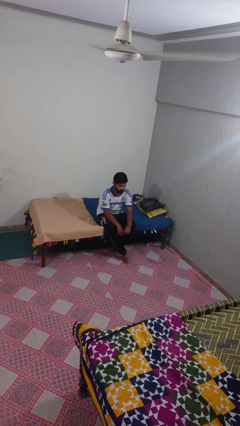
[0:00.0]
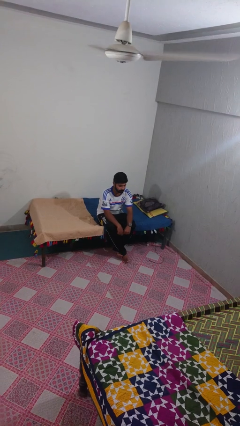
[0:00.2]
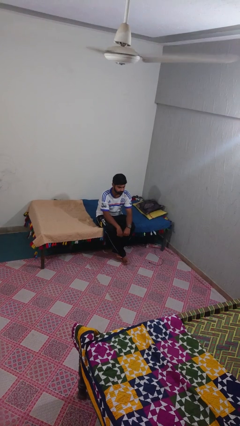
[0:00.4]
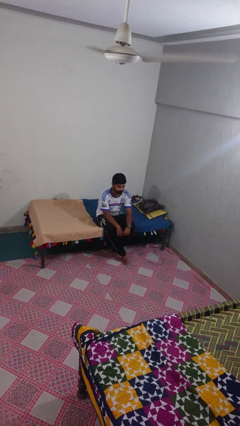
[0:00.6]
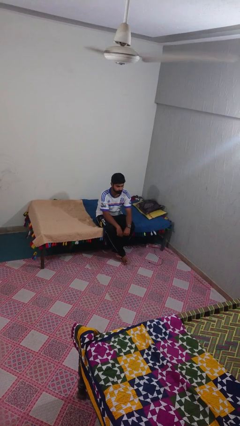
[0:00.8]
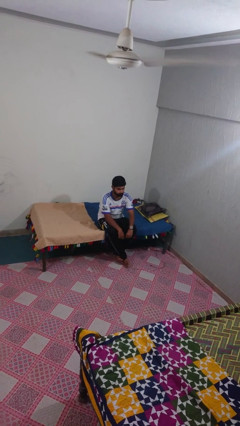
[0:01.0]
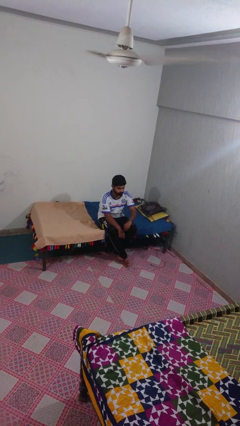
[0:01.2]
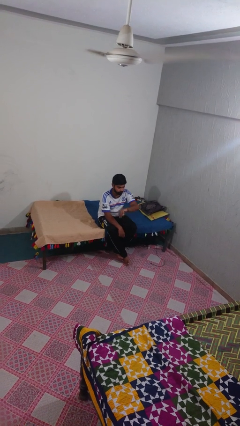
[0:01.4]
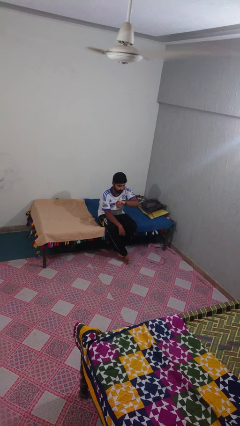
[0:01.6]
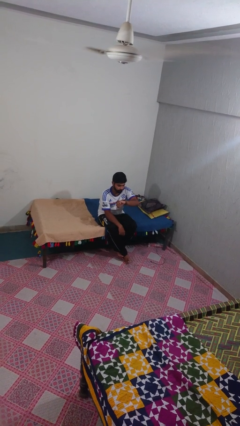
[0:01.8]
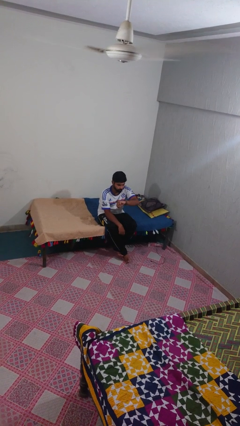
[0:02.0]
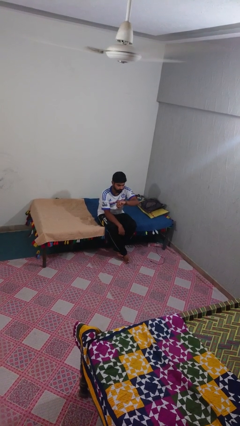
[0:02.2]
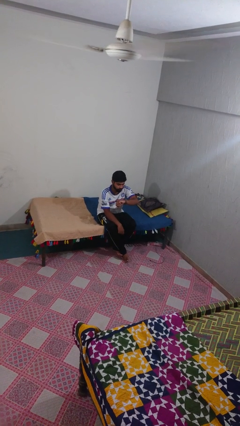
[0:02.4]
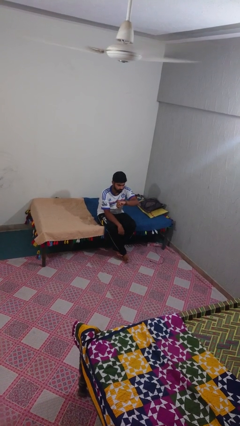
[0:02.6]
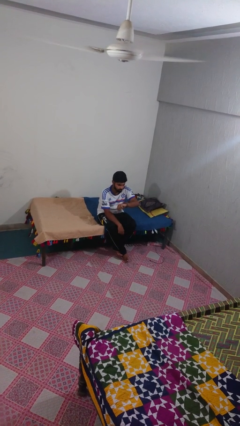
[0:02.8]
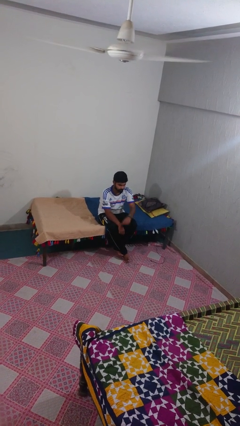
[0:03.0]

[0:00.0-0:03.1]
person looks at wristwatch

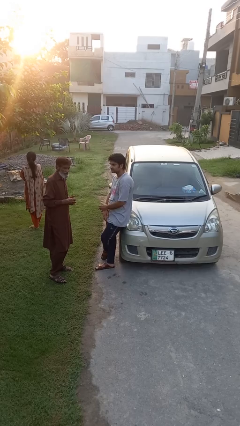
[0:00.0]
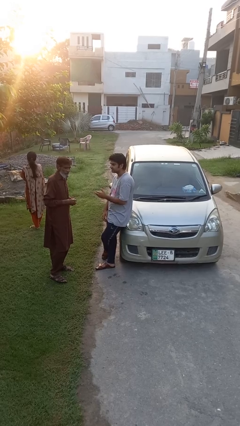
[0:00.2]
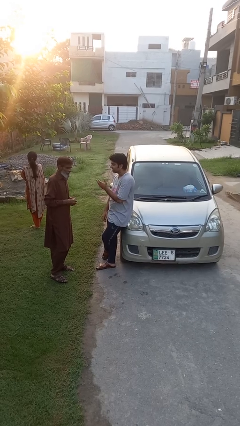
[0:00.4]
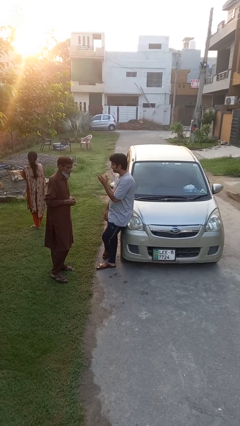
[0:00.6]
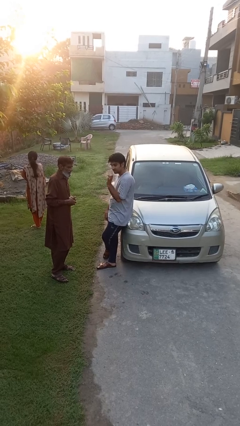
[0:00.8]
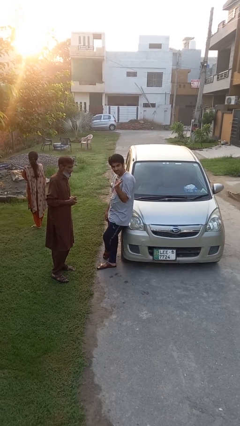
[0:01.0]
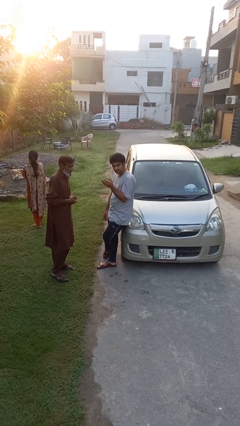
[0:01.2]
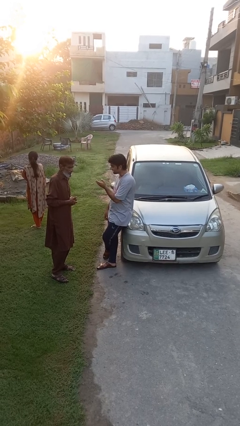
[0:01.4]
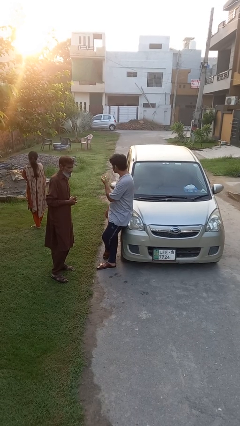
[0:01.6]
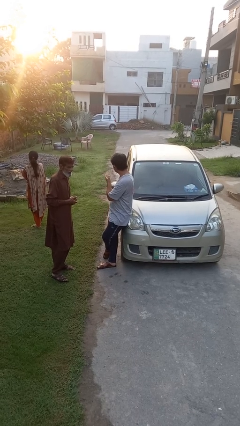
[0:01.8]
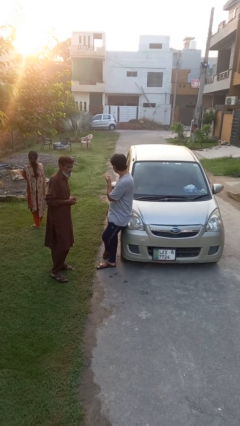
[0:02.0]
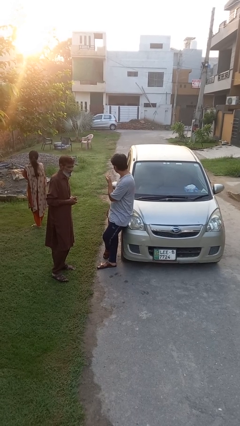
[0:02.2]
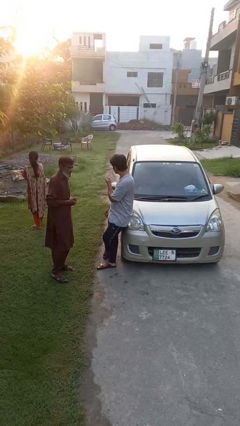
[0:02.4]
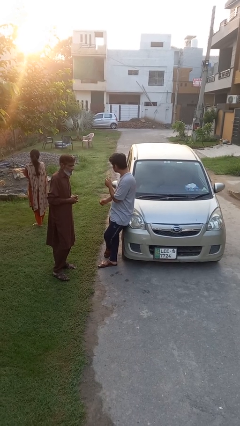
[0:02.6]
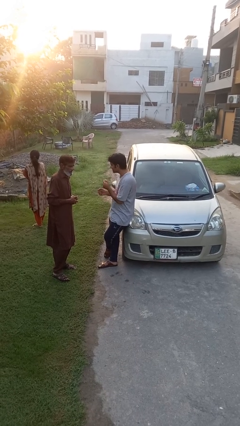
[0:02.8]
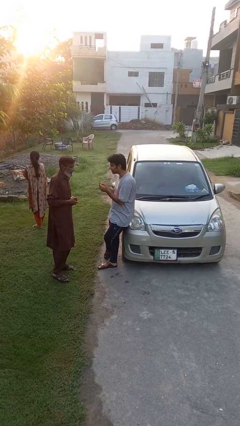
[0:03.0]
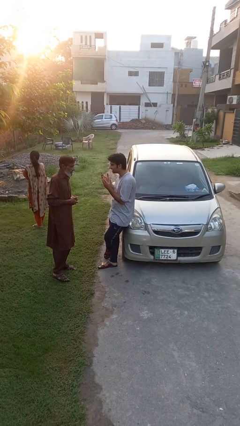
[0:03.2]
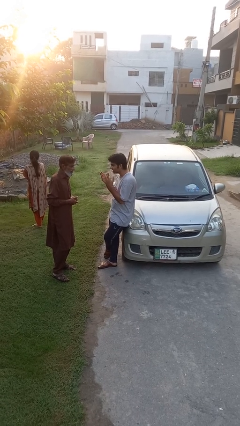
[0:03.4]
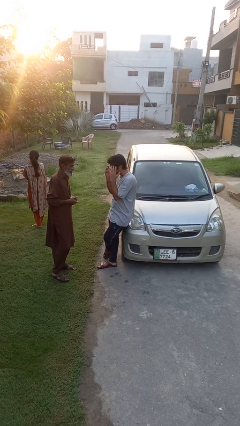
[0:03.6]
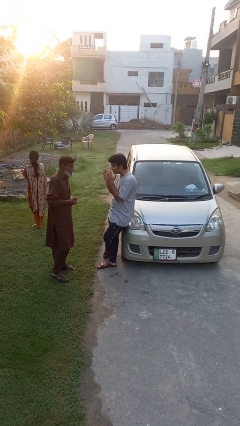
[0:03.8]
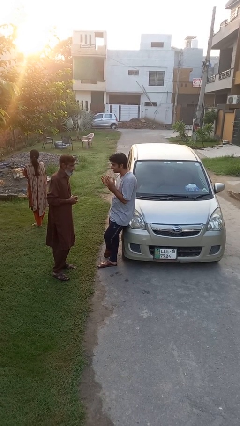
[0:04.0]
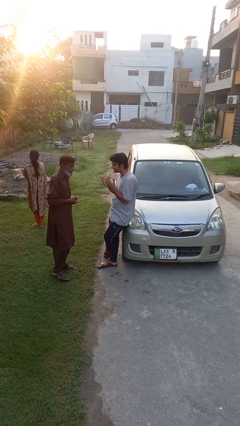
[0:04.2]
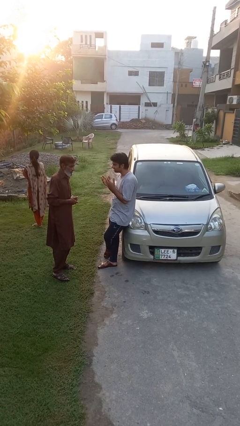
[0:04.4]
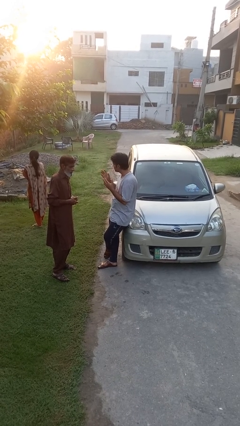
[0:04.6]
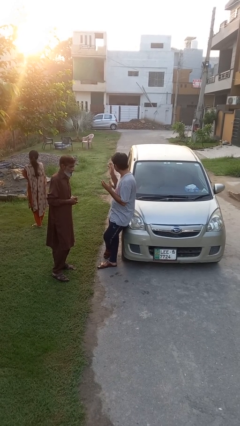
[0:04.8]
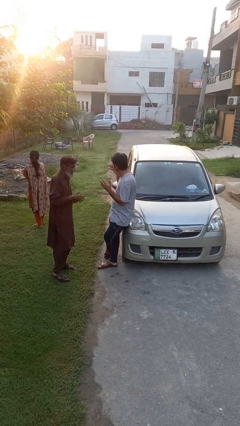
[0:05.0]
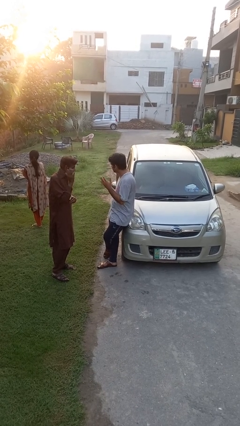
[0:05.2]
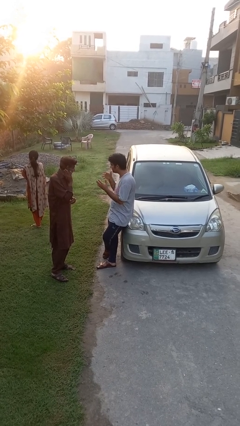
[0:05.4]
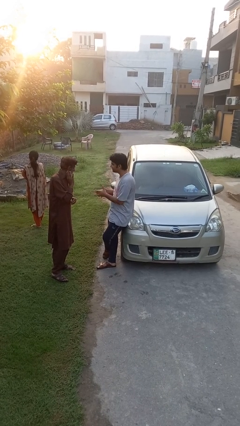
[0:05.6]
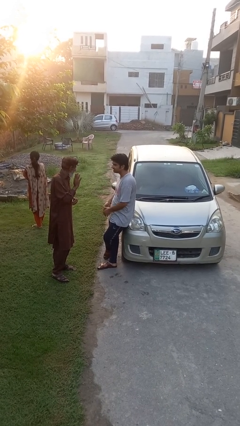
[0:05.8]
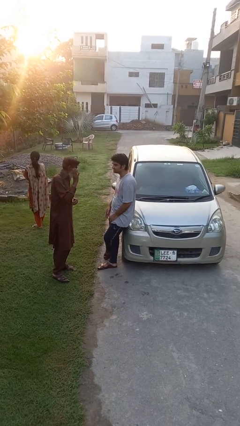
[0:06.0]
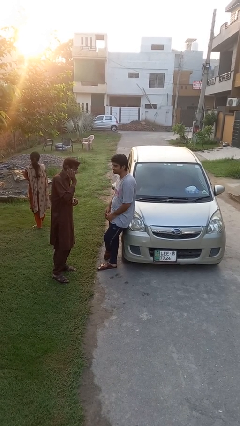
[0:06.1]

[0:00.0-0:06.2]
person talks to person

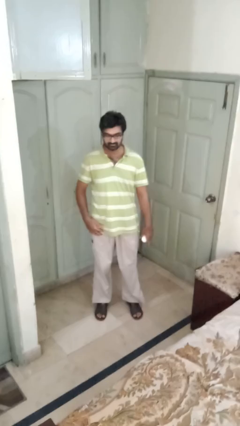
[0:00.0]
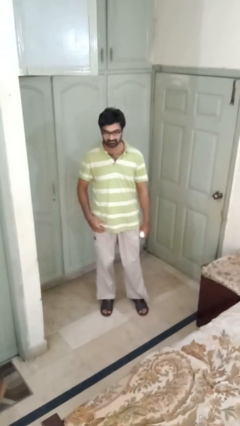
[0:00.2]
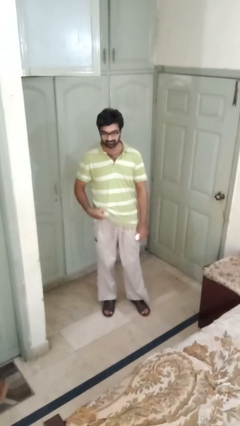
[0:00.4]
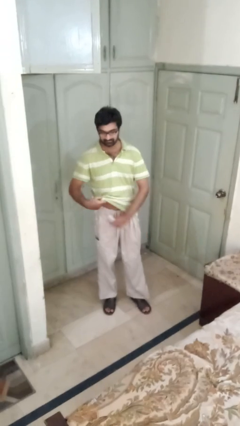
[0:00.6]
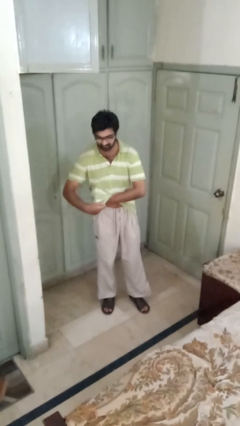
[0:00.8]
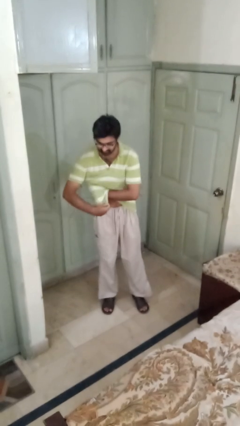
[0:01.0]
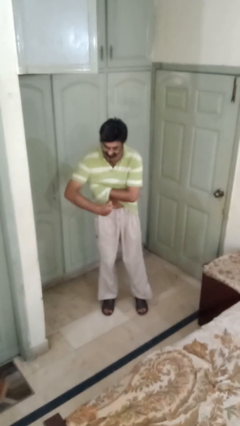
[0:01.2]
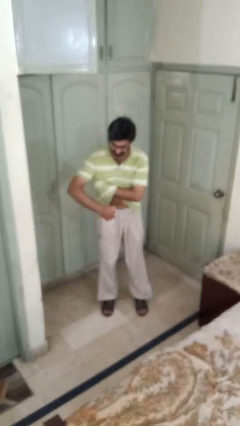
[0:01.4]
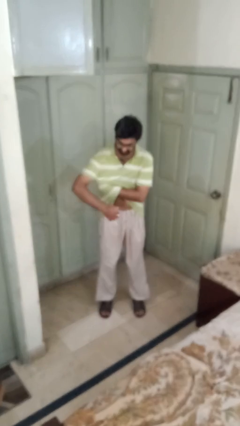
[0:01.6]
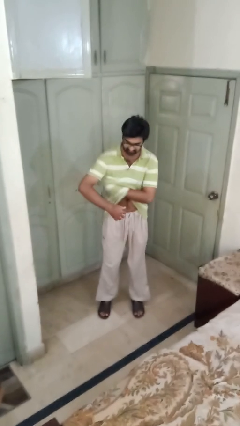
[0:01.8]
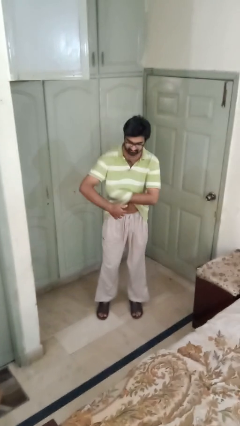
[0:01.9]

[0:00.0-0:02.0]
person applies deodorant

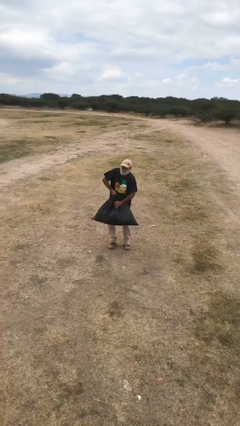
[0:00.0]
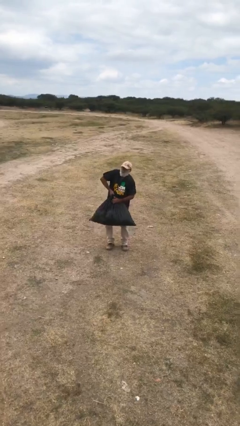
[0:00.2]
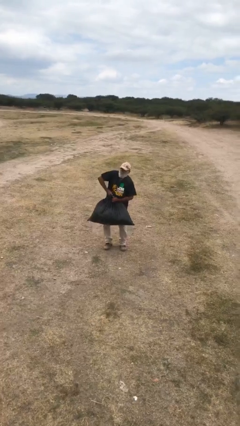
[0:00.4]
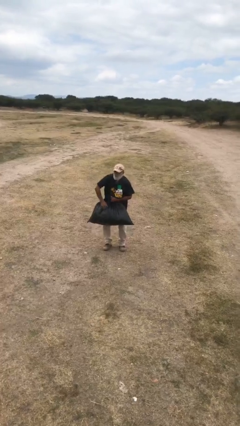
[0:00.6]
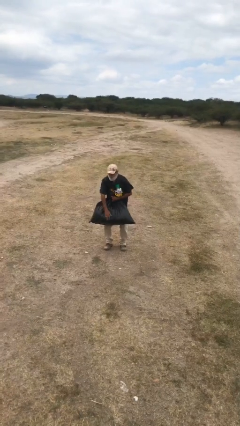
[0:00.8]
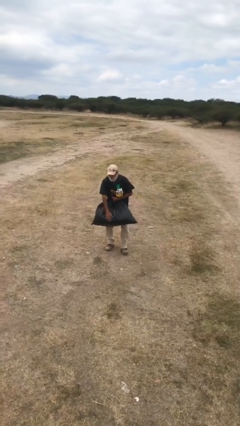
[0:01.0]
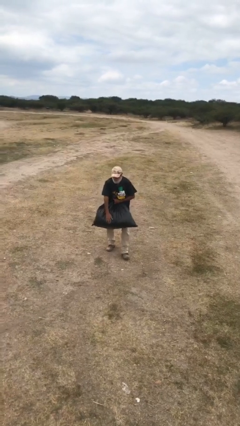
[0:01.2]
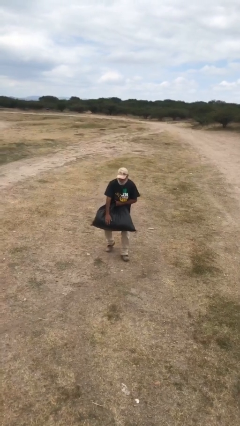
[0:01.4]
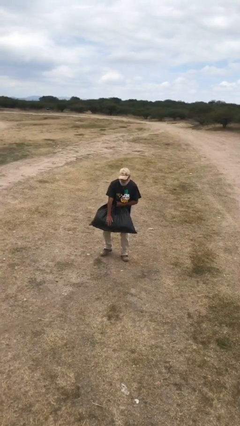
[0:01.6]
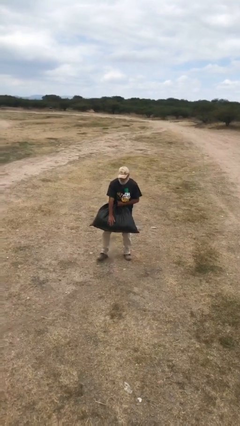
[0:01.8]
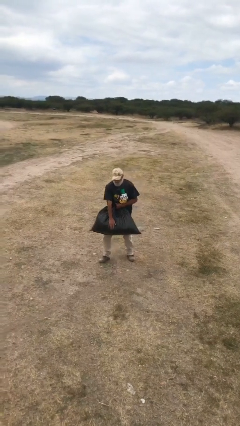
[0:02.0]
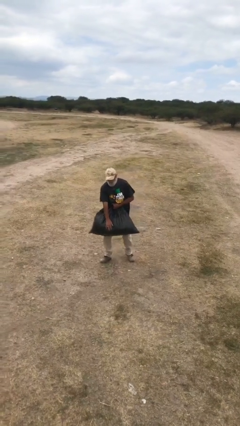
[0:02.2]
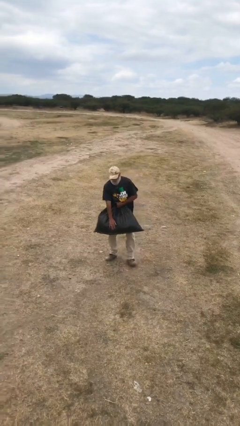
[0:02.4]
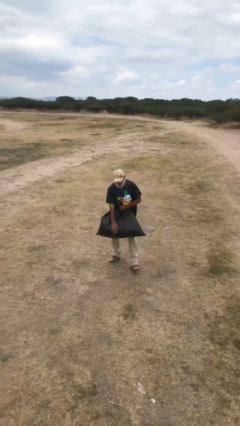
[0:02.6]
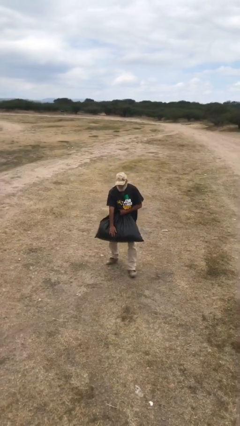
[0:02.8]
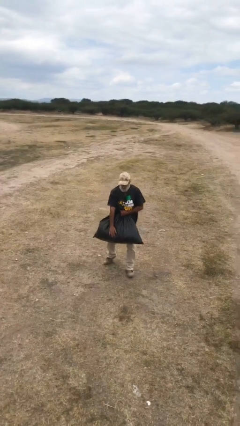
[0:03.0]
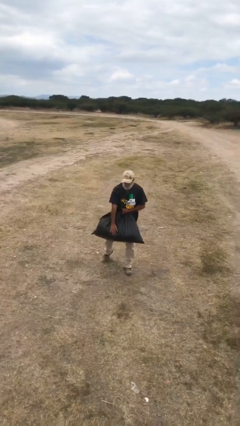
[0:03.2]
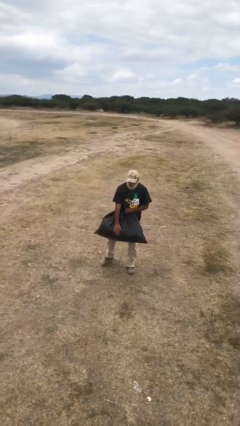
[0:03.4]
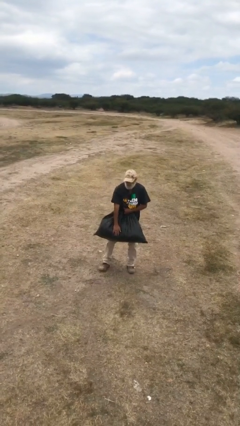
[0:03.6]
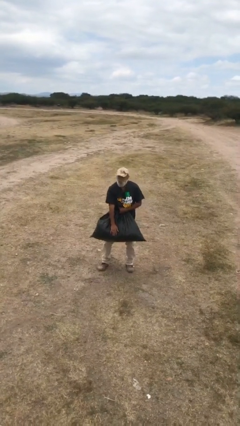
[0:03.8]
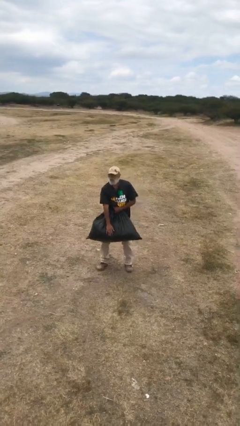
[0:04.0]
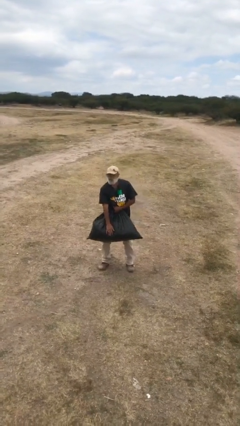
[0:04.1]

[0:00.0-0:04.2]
person carries heavy object

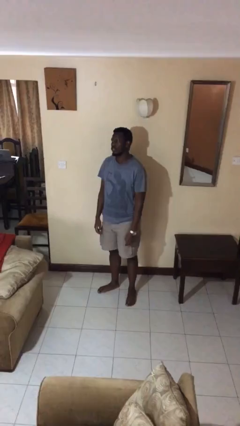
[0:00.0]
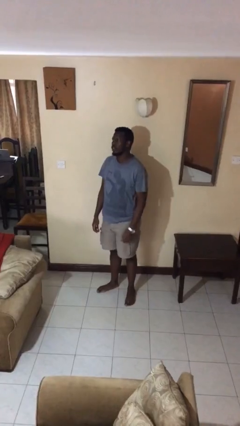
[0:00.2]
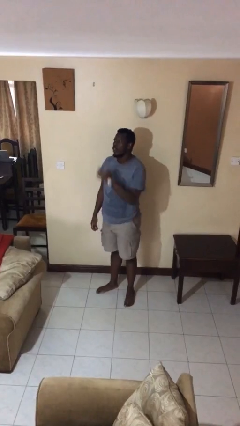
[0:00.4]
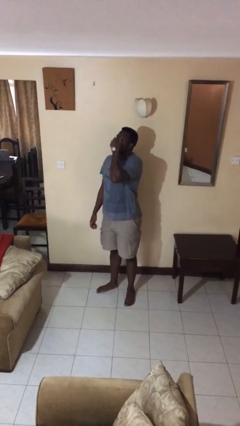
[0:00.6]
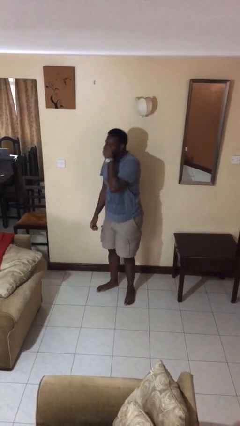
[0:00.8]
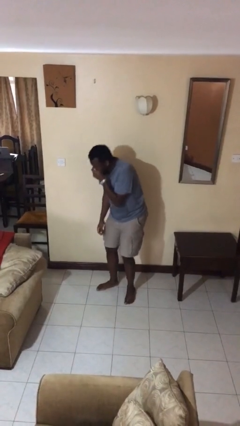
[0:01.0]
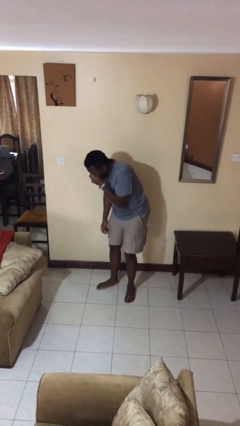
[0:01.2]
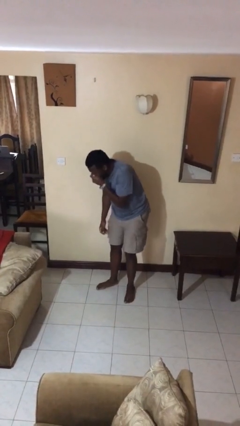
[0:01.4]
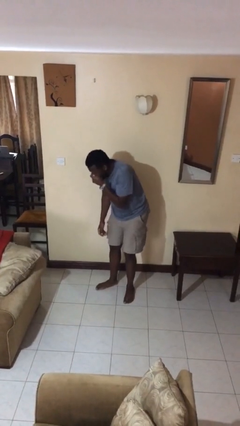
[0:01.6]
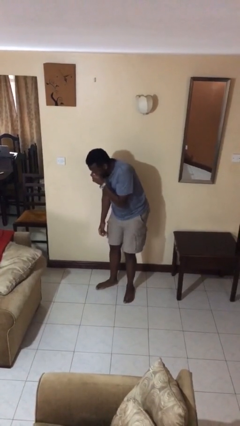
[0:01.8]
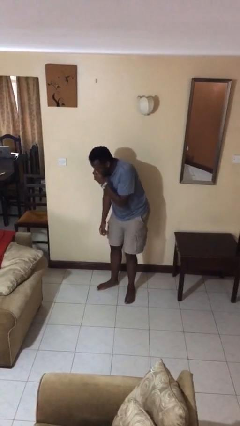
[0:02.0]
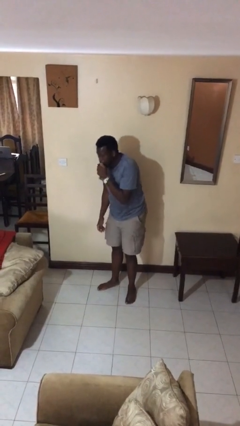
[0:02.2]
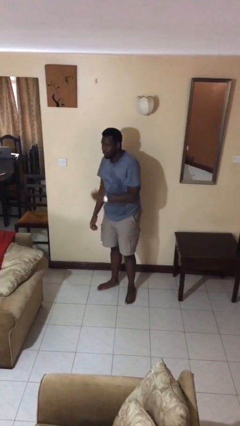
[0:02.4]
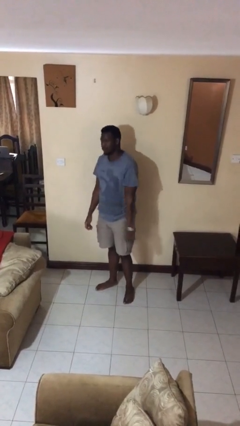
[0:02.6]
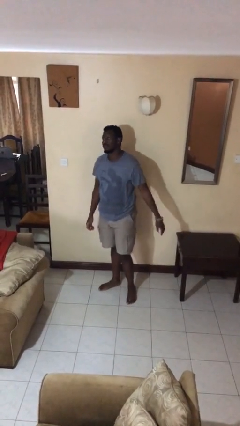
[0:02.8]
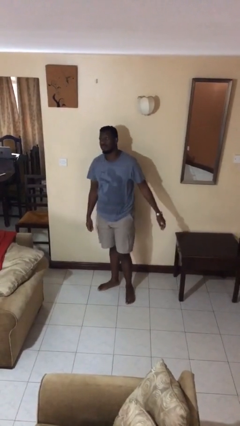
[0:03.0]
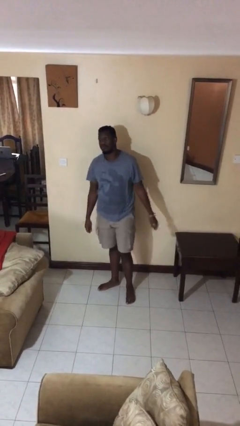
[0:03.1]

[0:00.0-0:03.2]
person sneezes into hand
